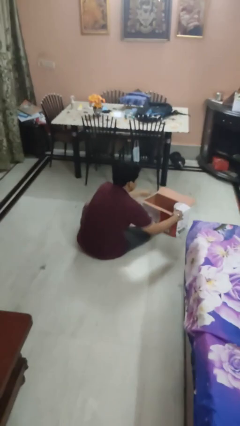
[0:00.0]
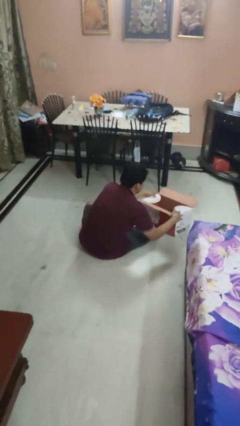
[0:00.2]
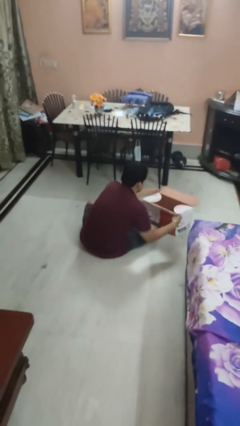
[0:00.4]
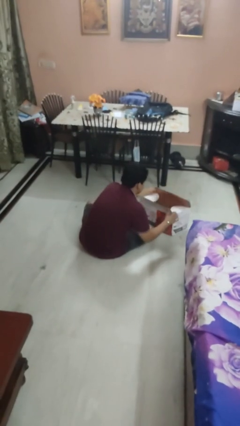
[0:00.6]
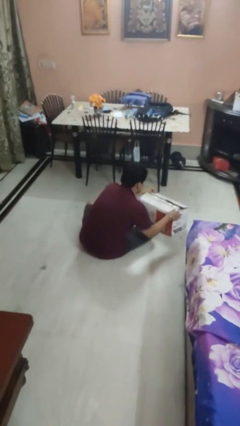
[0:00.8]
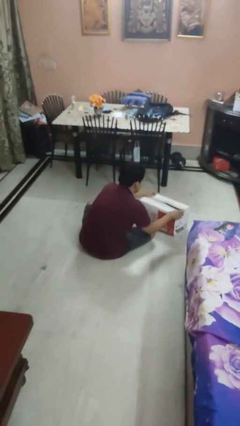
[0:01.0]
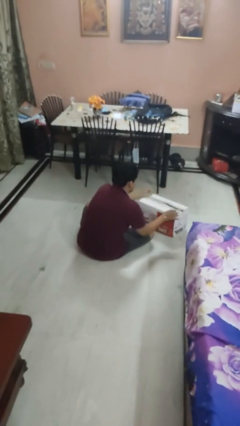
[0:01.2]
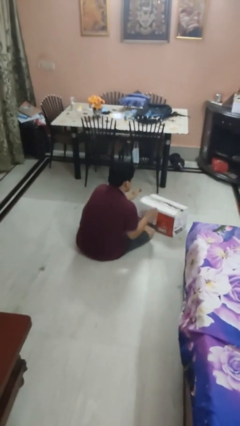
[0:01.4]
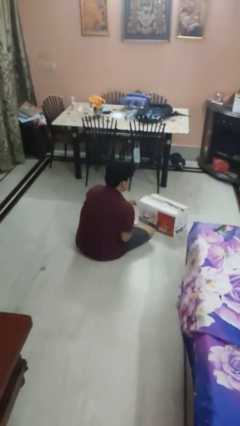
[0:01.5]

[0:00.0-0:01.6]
person closes box

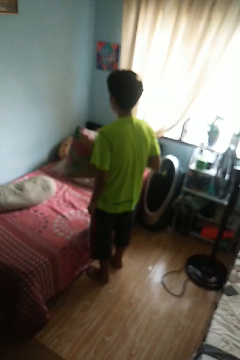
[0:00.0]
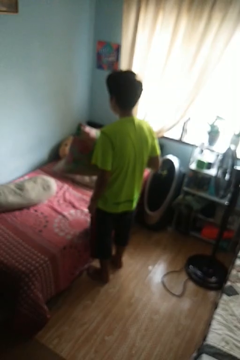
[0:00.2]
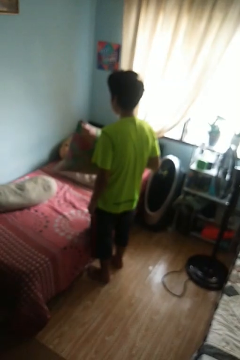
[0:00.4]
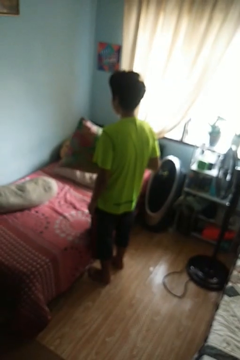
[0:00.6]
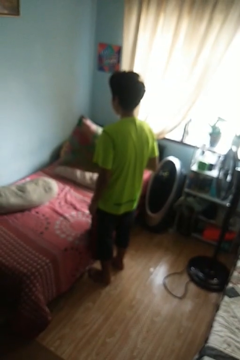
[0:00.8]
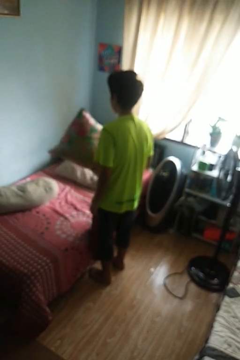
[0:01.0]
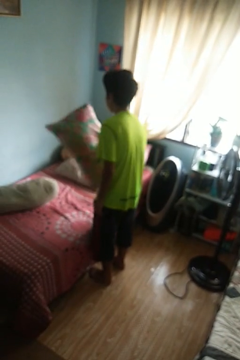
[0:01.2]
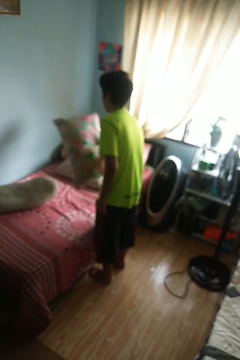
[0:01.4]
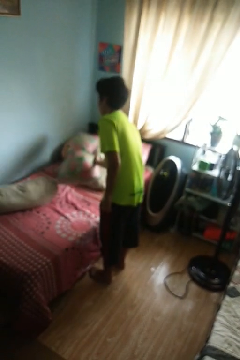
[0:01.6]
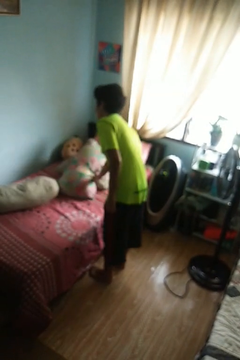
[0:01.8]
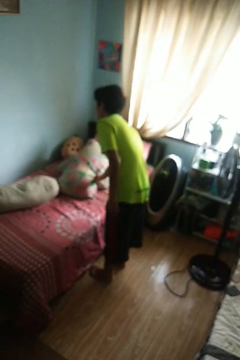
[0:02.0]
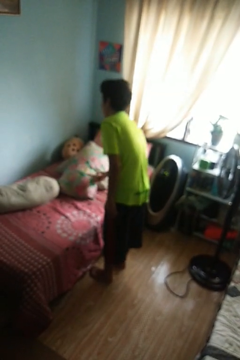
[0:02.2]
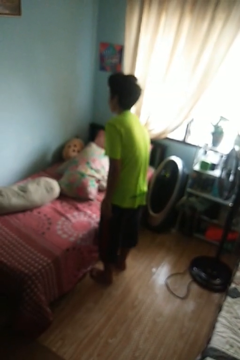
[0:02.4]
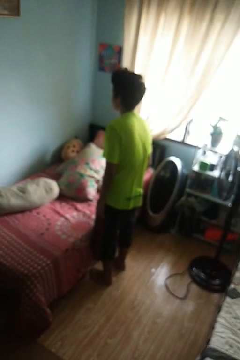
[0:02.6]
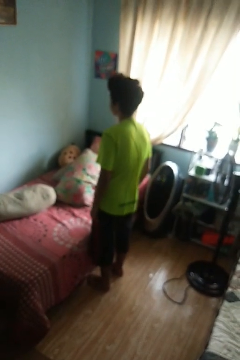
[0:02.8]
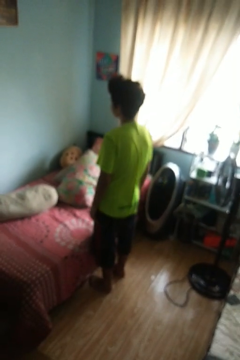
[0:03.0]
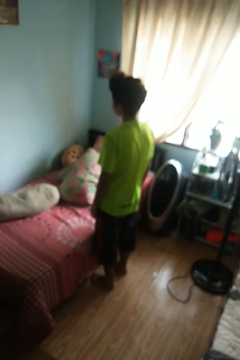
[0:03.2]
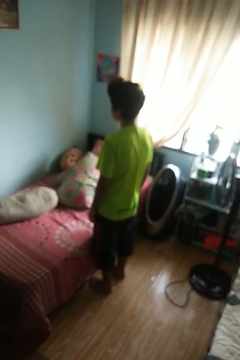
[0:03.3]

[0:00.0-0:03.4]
person puts down object on bed

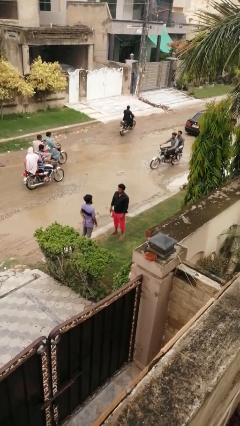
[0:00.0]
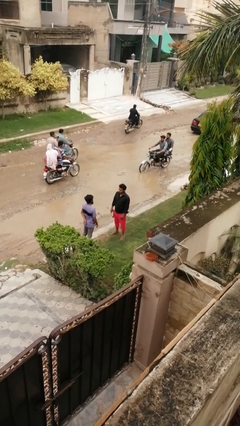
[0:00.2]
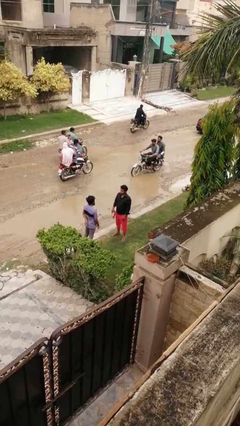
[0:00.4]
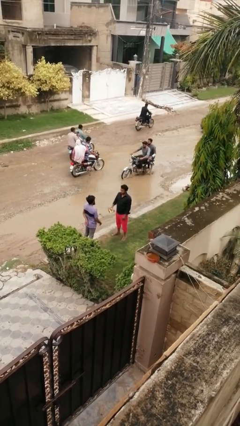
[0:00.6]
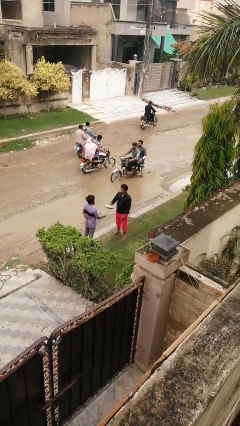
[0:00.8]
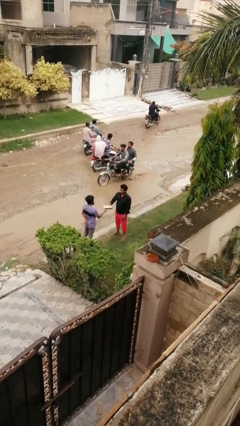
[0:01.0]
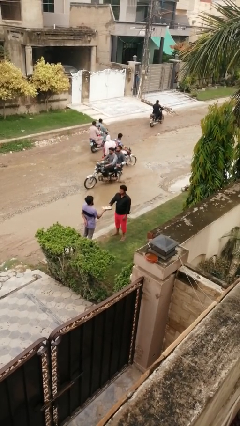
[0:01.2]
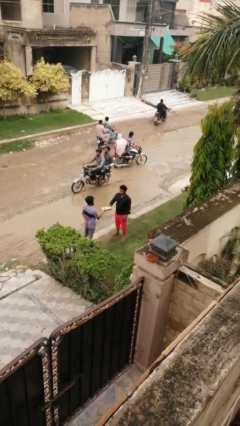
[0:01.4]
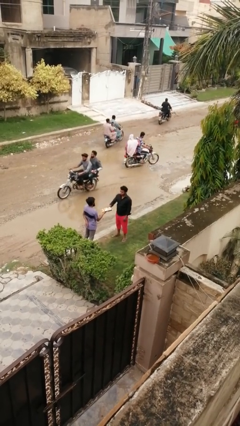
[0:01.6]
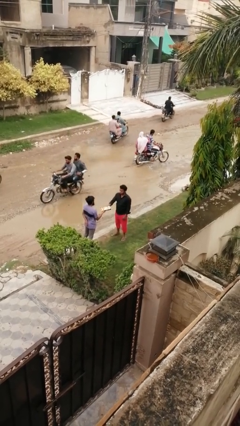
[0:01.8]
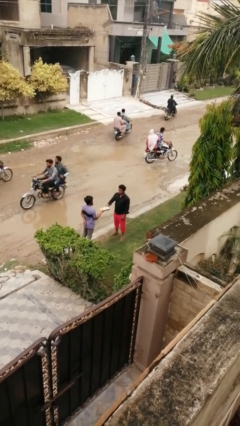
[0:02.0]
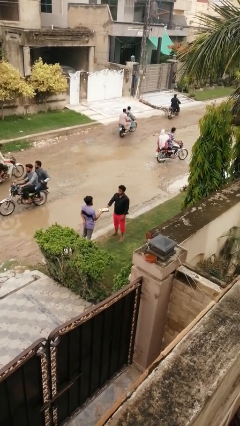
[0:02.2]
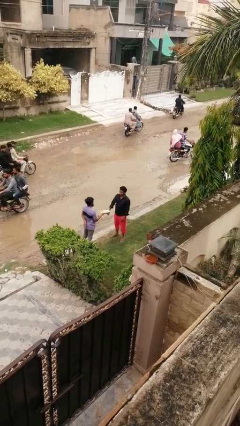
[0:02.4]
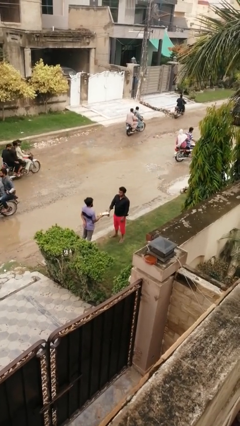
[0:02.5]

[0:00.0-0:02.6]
person transfers object to person

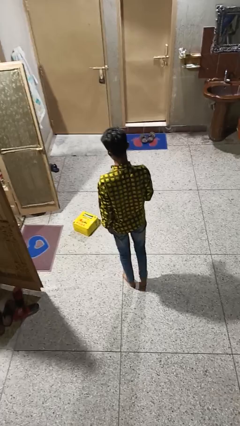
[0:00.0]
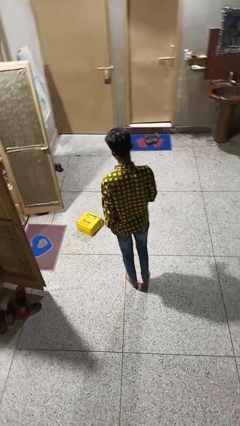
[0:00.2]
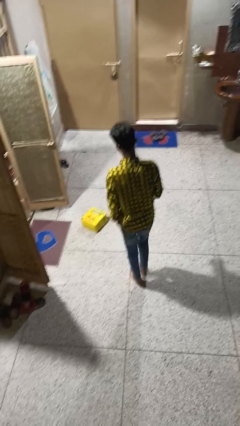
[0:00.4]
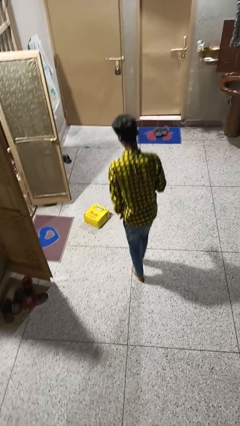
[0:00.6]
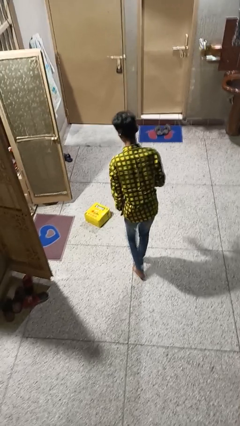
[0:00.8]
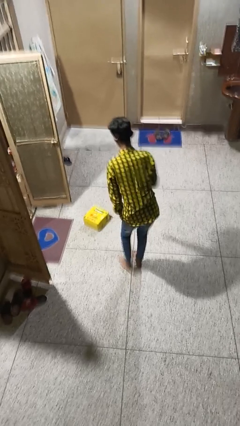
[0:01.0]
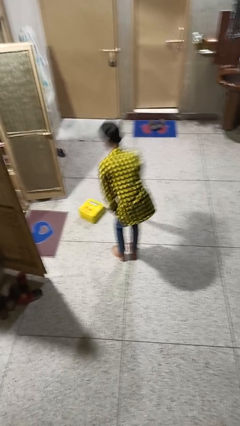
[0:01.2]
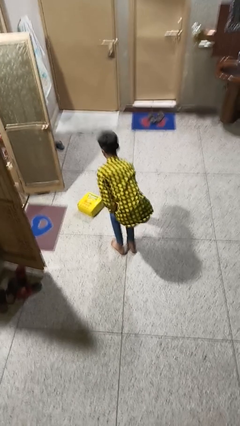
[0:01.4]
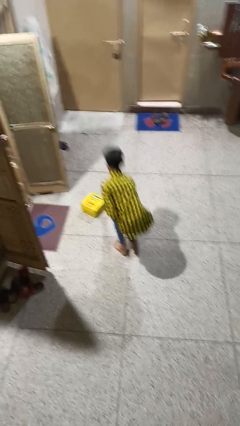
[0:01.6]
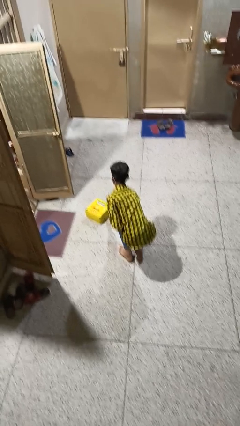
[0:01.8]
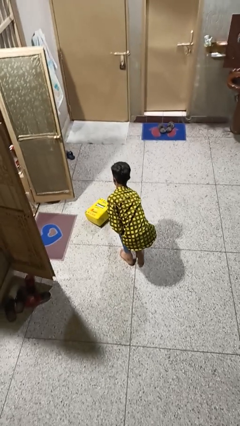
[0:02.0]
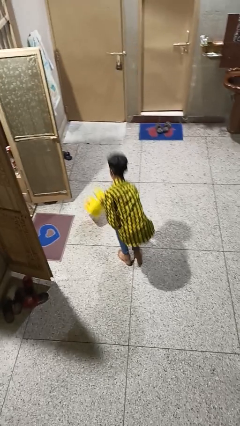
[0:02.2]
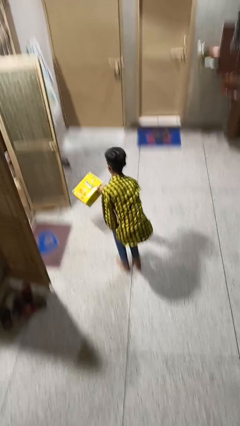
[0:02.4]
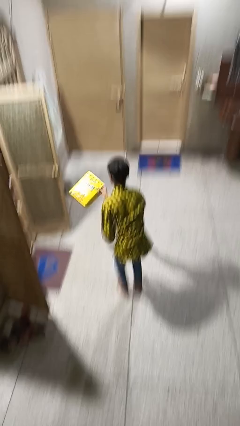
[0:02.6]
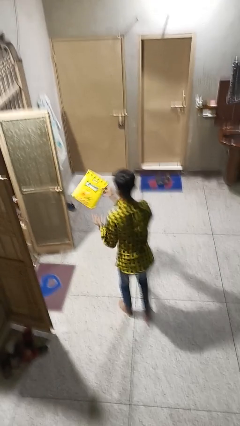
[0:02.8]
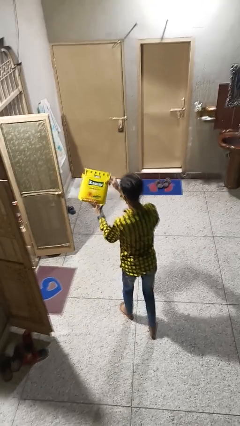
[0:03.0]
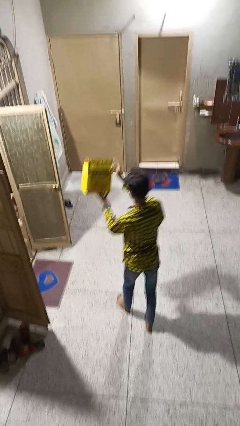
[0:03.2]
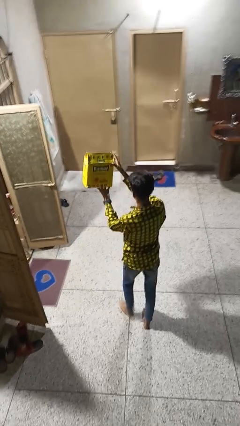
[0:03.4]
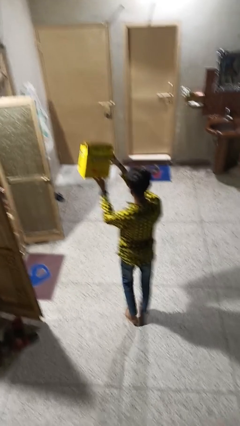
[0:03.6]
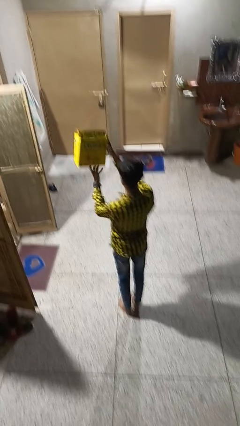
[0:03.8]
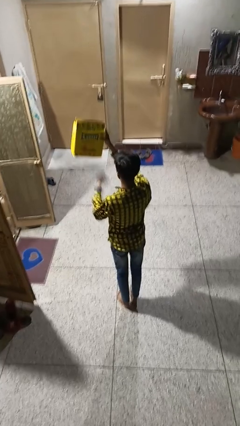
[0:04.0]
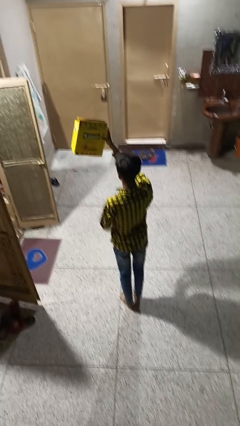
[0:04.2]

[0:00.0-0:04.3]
person picks up object from floor

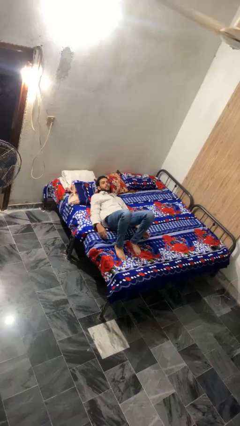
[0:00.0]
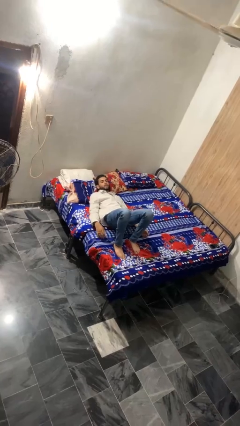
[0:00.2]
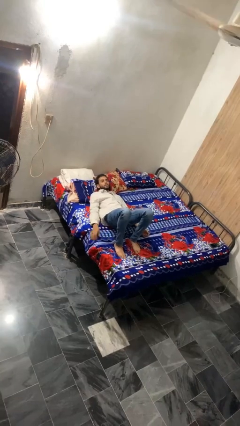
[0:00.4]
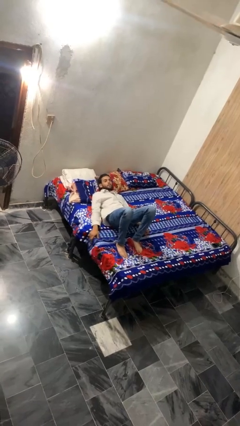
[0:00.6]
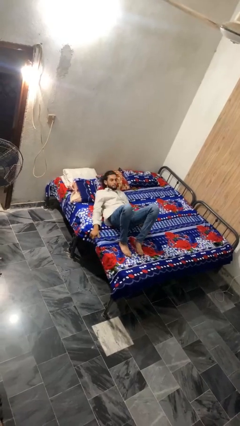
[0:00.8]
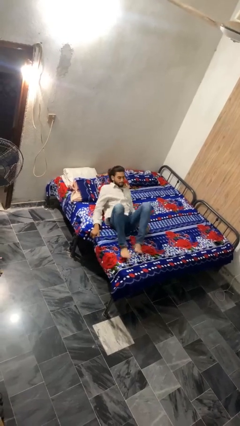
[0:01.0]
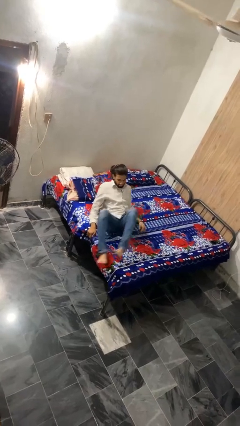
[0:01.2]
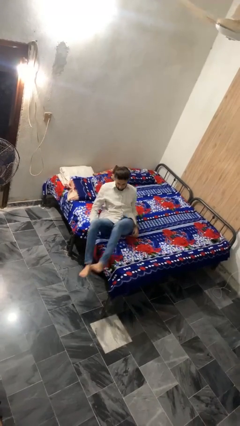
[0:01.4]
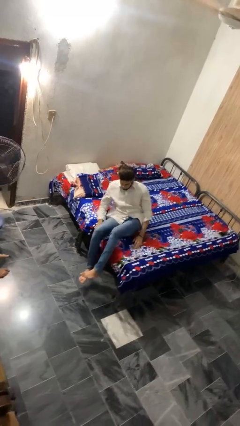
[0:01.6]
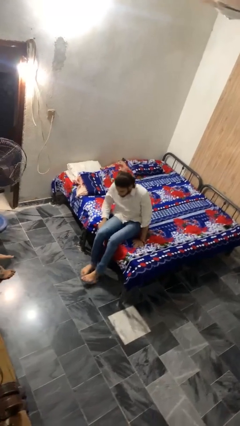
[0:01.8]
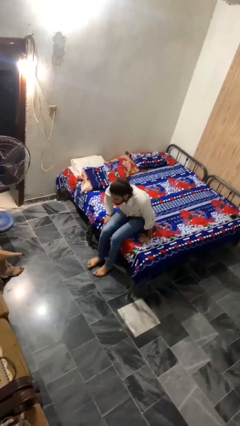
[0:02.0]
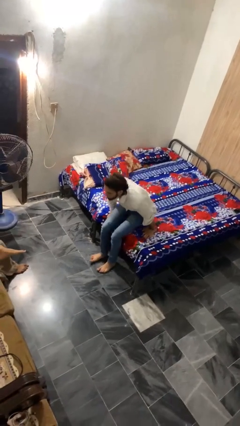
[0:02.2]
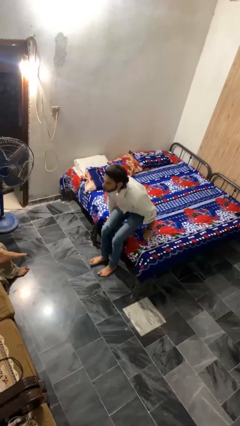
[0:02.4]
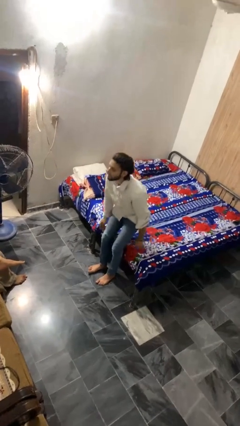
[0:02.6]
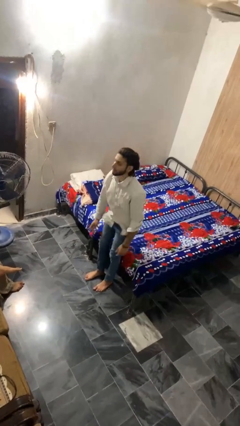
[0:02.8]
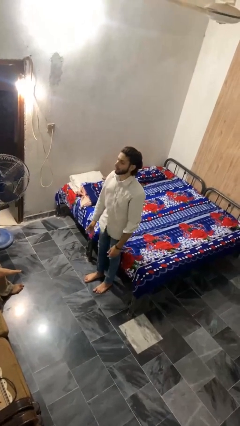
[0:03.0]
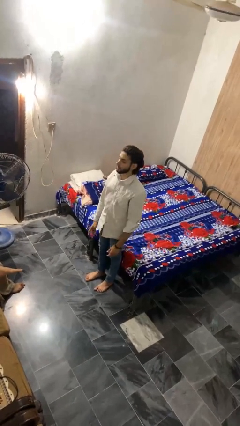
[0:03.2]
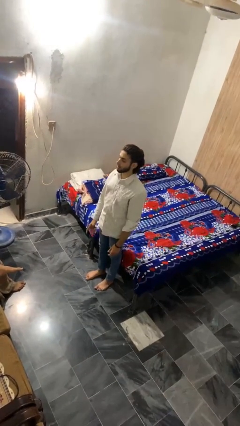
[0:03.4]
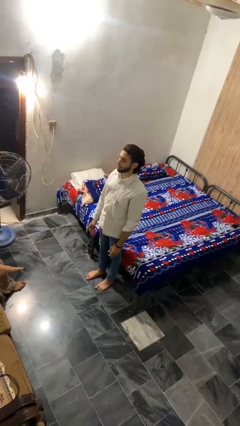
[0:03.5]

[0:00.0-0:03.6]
person stands up

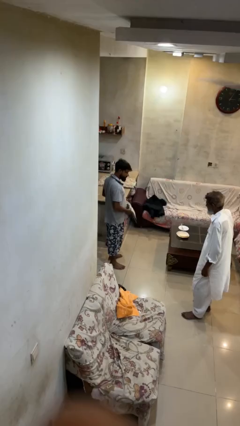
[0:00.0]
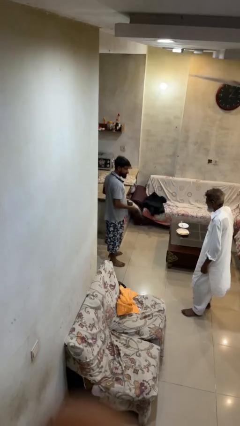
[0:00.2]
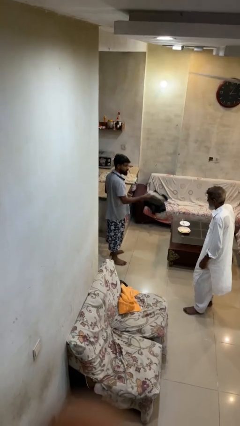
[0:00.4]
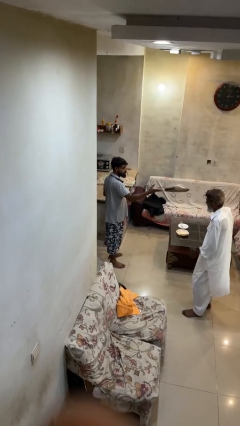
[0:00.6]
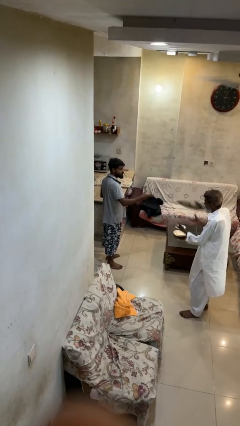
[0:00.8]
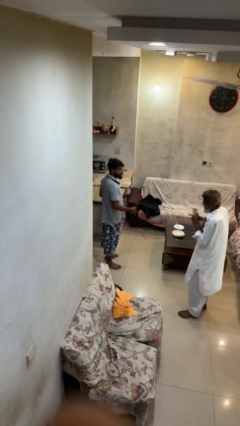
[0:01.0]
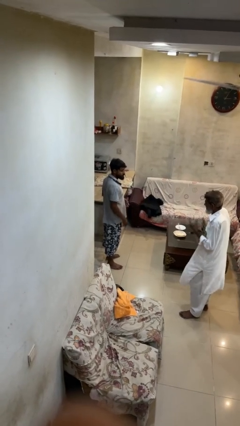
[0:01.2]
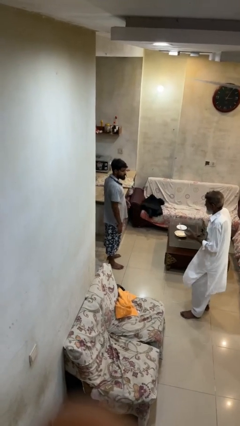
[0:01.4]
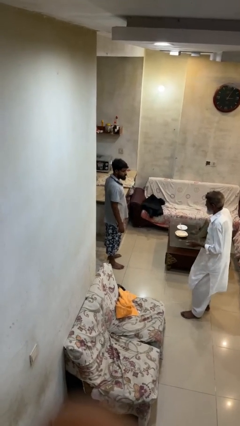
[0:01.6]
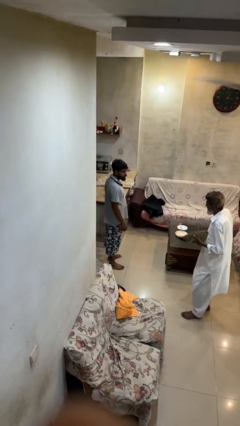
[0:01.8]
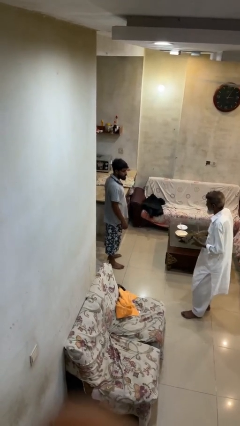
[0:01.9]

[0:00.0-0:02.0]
person throws object to person

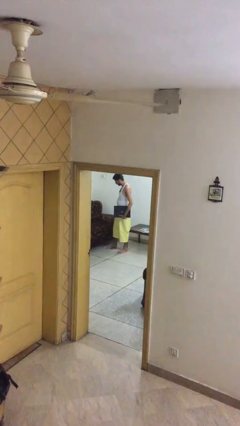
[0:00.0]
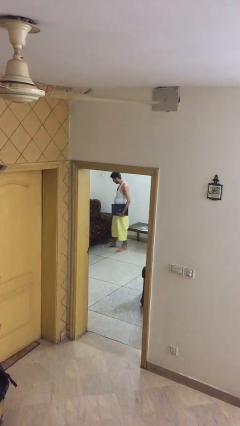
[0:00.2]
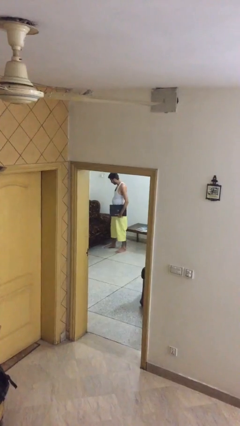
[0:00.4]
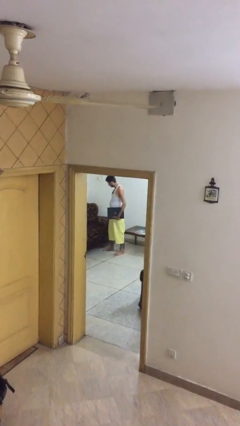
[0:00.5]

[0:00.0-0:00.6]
person sits down
